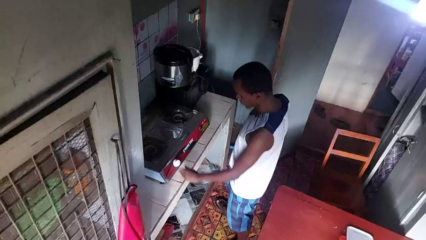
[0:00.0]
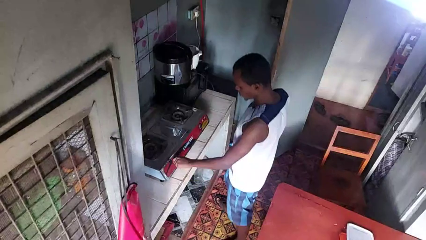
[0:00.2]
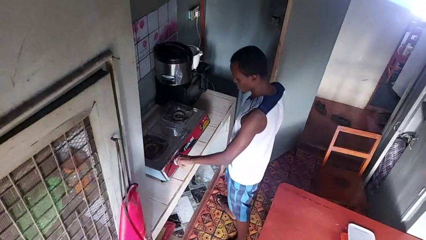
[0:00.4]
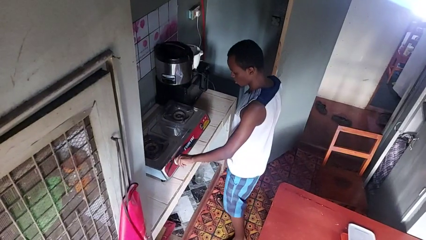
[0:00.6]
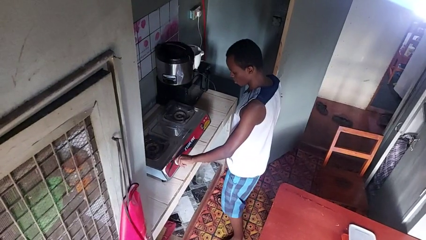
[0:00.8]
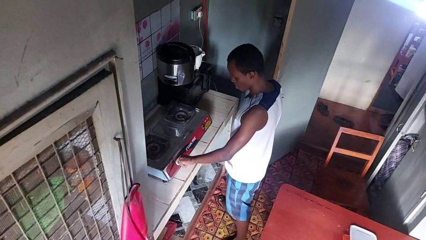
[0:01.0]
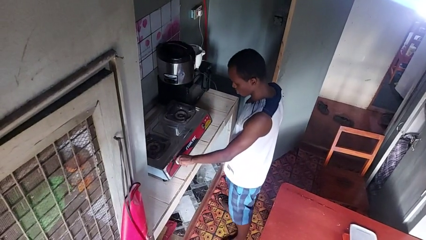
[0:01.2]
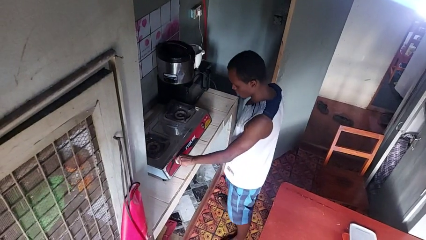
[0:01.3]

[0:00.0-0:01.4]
person turns on stovetop

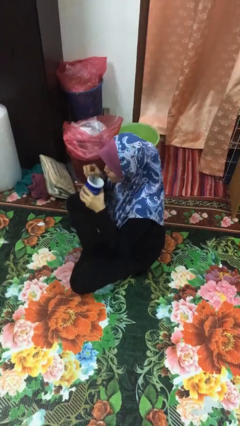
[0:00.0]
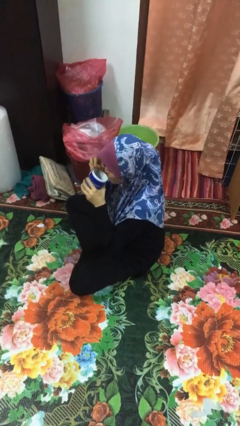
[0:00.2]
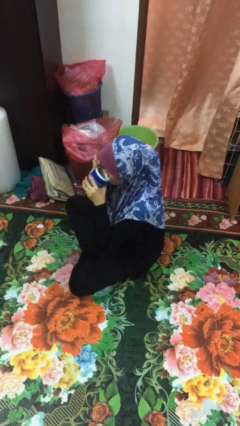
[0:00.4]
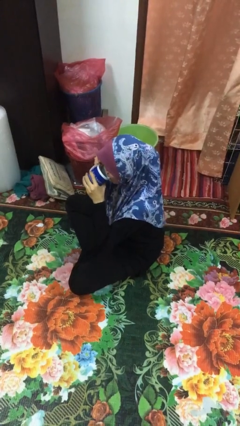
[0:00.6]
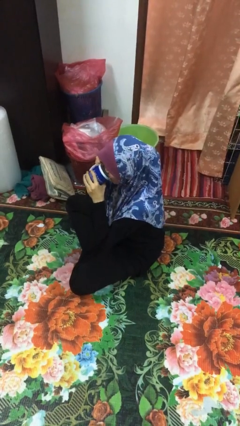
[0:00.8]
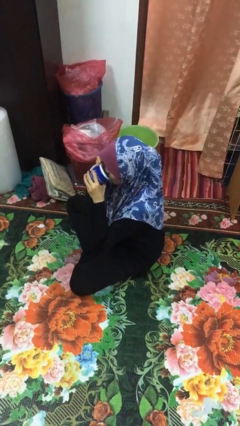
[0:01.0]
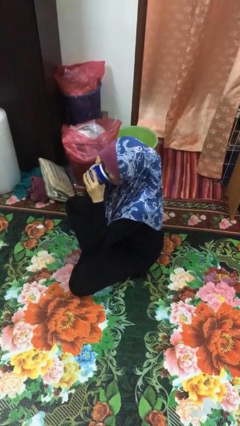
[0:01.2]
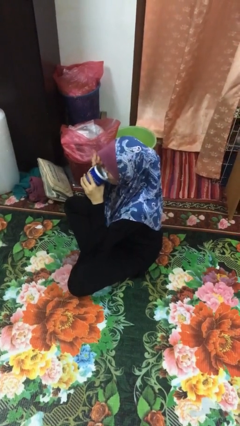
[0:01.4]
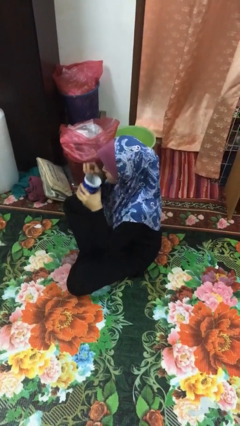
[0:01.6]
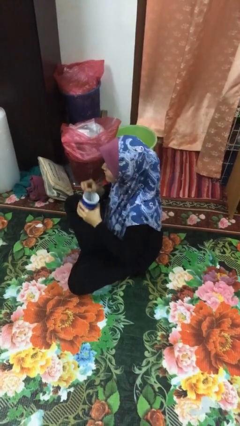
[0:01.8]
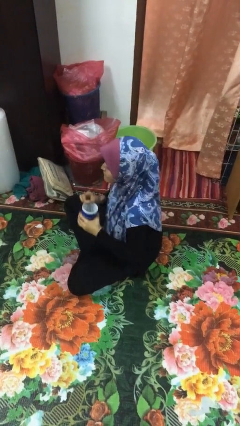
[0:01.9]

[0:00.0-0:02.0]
person drinks from mug

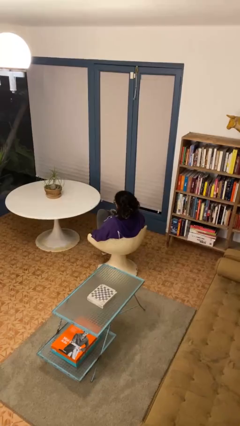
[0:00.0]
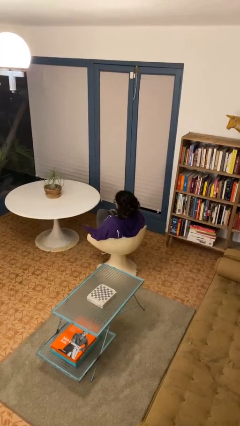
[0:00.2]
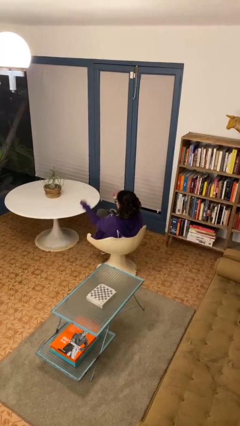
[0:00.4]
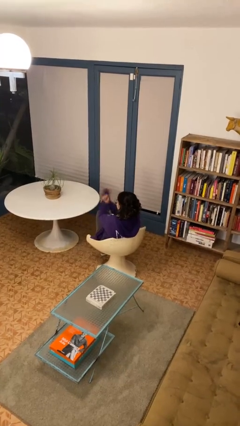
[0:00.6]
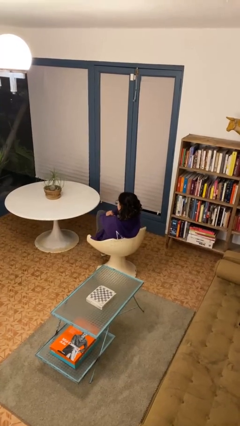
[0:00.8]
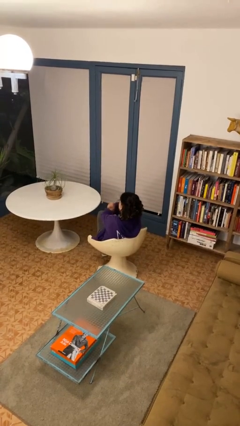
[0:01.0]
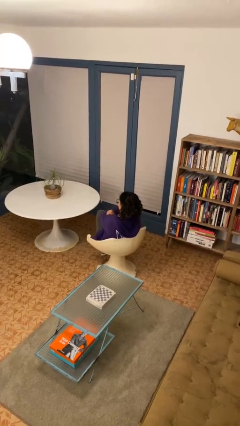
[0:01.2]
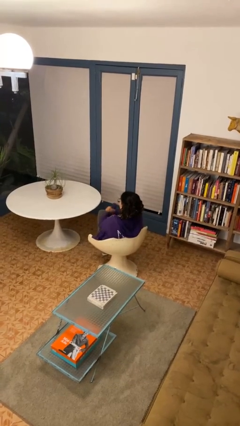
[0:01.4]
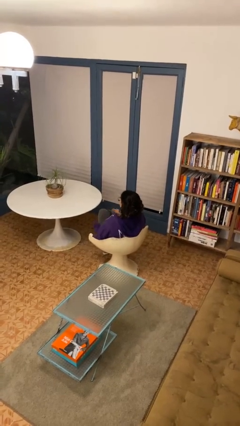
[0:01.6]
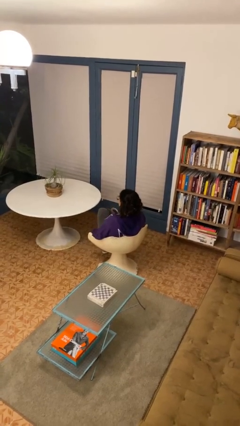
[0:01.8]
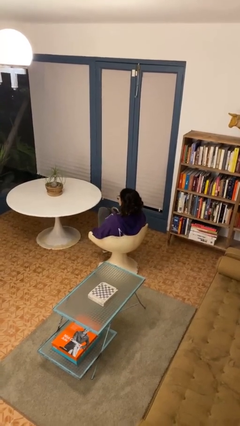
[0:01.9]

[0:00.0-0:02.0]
person gestures arms x

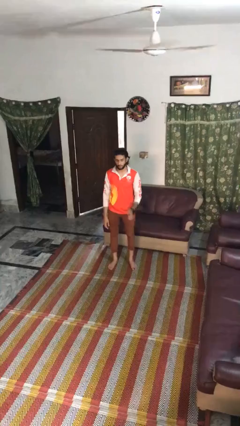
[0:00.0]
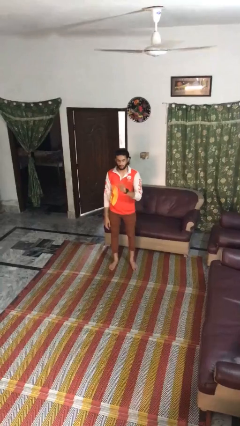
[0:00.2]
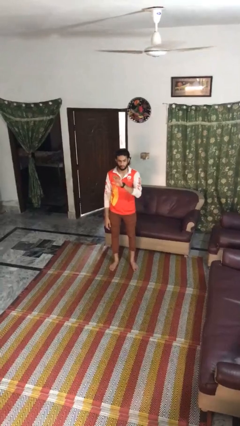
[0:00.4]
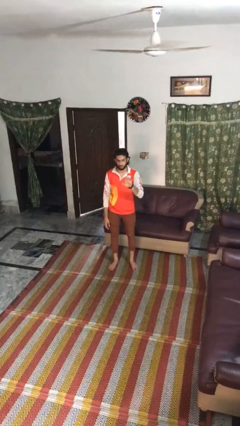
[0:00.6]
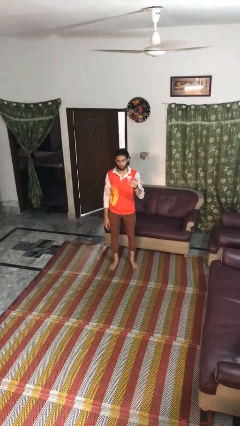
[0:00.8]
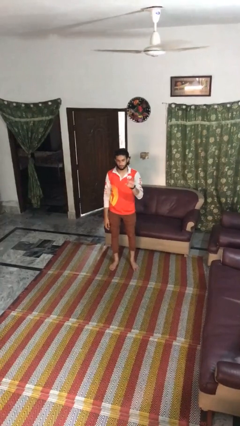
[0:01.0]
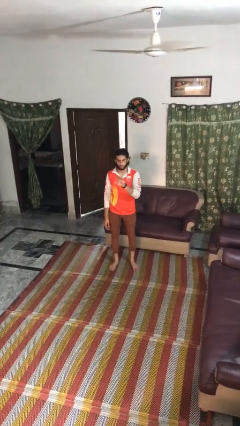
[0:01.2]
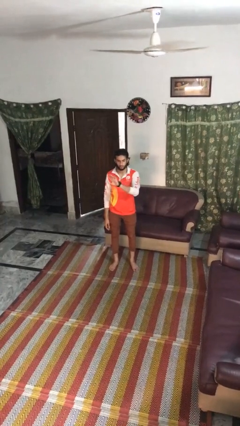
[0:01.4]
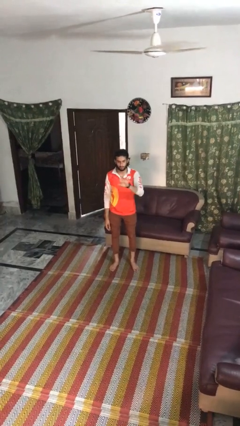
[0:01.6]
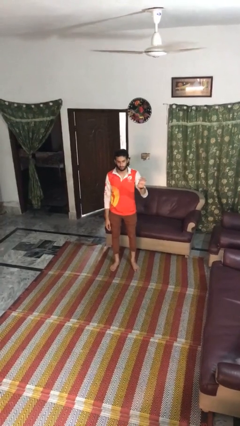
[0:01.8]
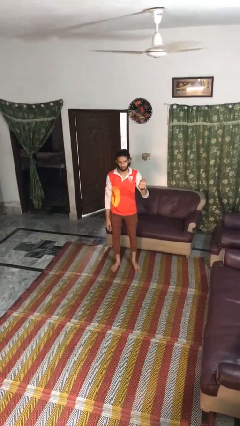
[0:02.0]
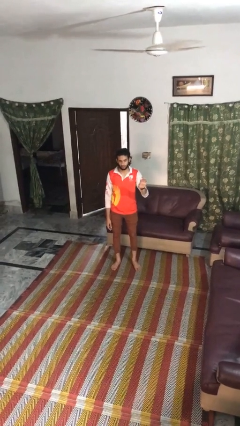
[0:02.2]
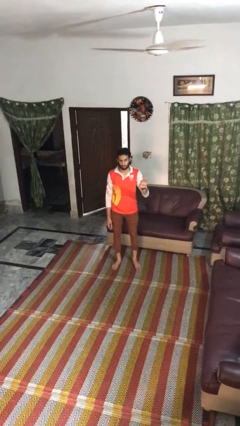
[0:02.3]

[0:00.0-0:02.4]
person gestures swipe left

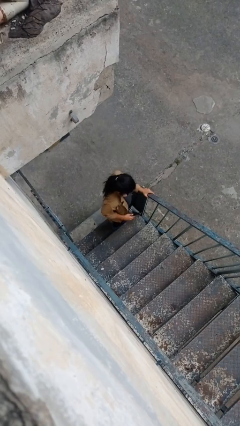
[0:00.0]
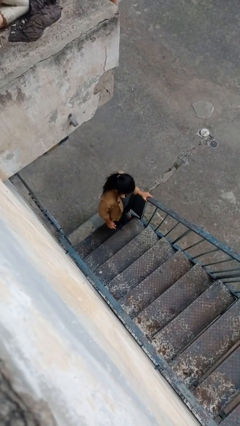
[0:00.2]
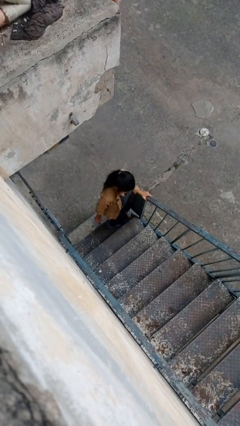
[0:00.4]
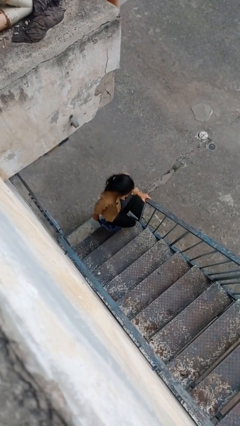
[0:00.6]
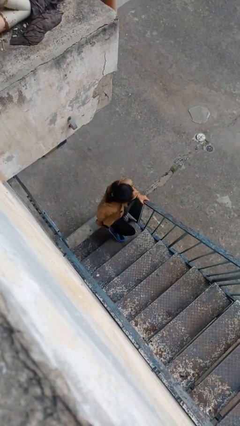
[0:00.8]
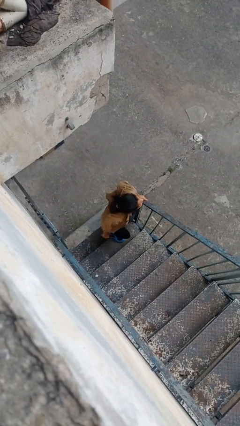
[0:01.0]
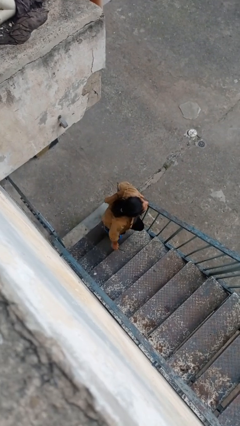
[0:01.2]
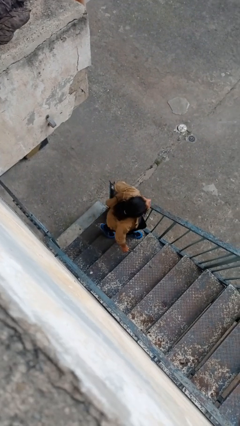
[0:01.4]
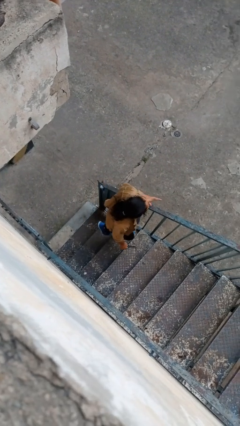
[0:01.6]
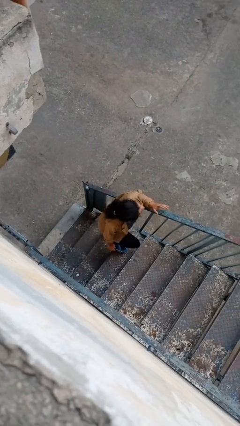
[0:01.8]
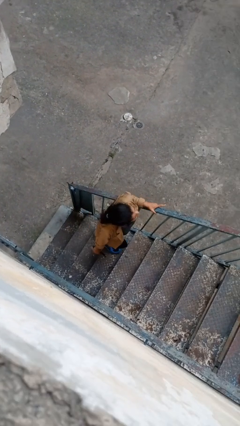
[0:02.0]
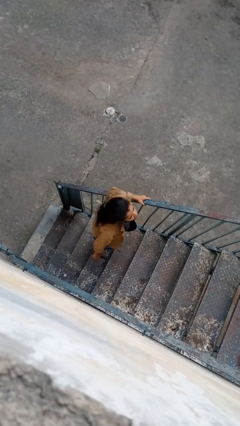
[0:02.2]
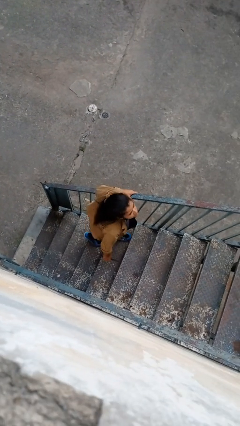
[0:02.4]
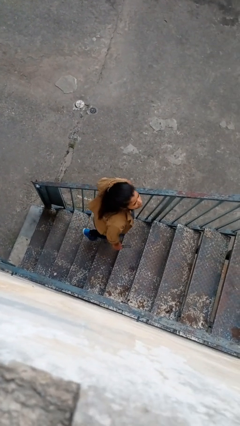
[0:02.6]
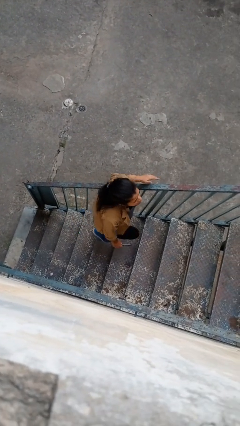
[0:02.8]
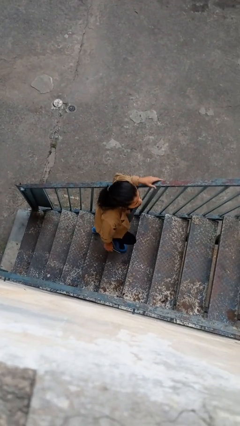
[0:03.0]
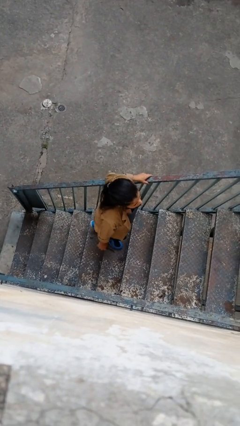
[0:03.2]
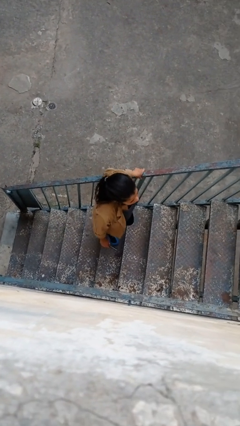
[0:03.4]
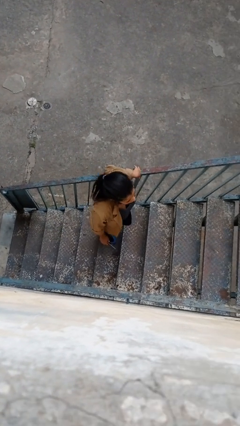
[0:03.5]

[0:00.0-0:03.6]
person climbs up stairs

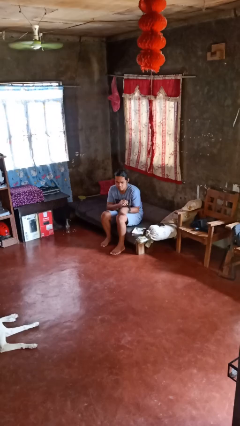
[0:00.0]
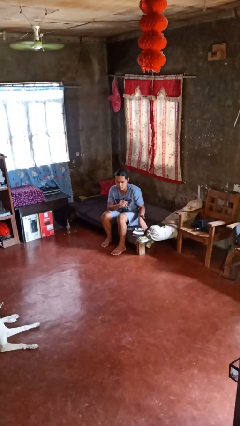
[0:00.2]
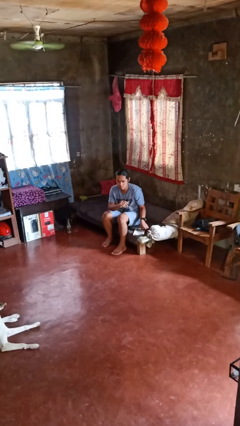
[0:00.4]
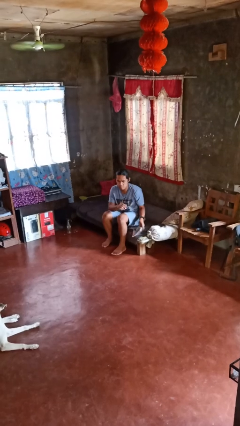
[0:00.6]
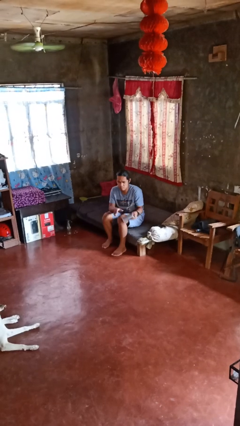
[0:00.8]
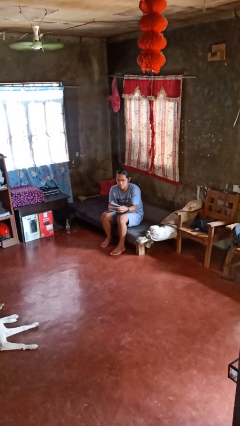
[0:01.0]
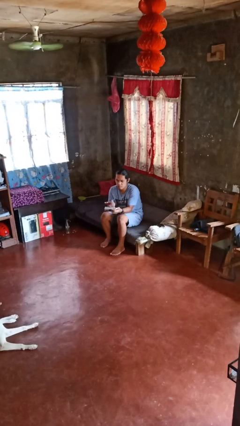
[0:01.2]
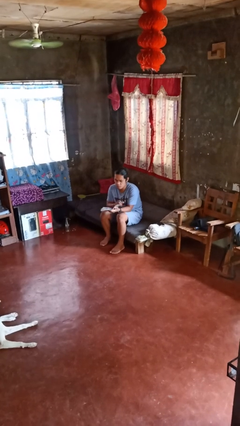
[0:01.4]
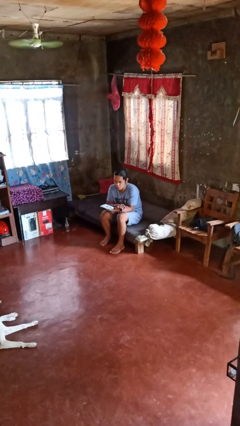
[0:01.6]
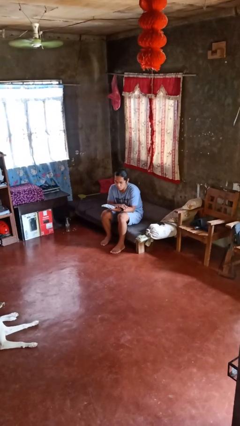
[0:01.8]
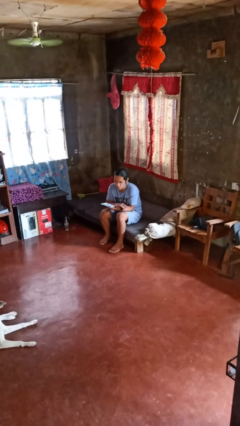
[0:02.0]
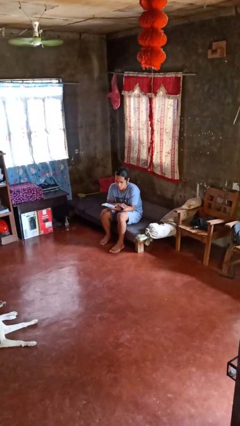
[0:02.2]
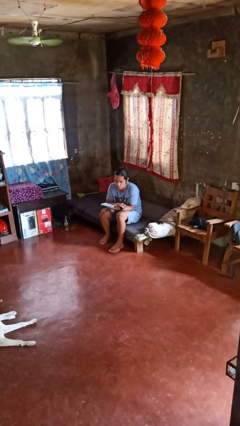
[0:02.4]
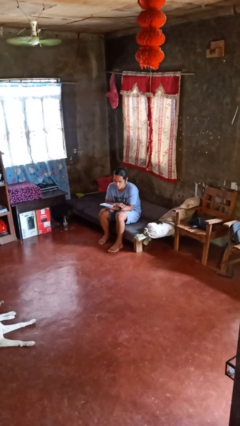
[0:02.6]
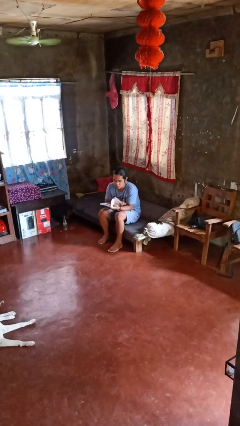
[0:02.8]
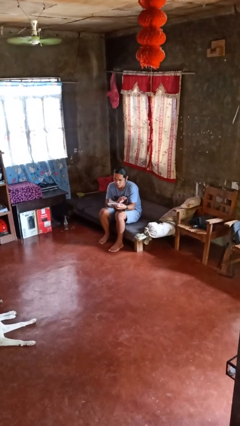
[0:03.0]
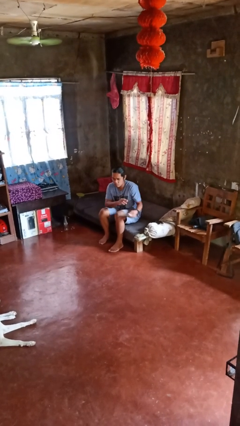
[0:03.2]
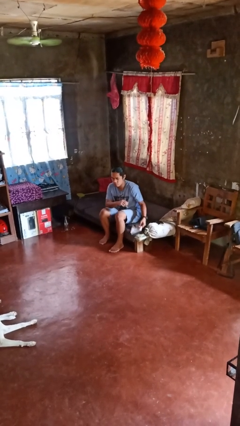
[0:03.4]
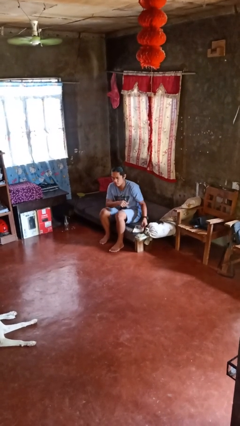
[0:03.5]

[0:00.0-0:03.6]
person reads magazine

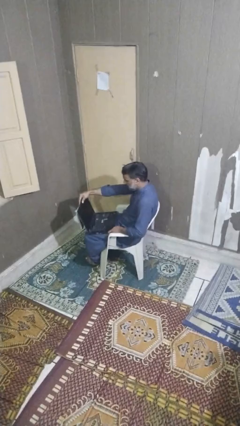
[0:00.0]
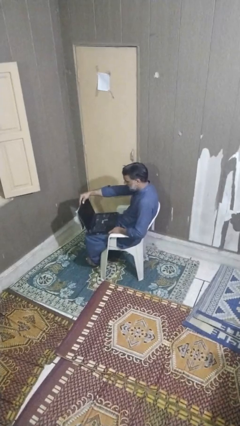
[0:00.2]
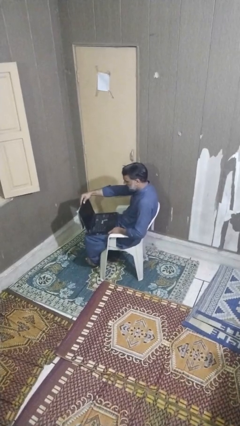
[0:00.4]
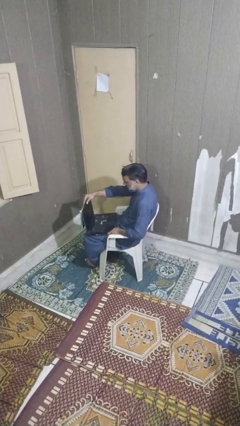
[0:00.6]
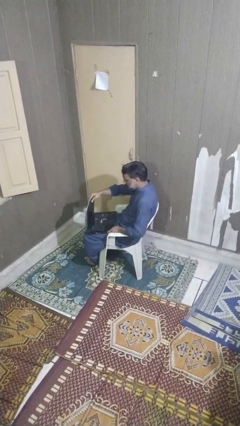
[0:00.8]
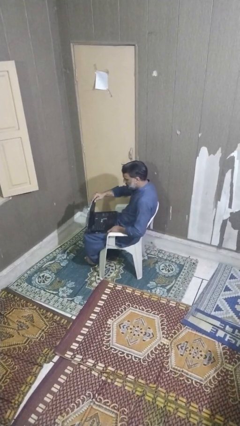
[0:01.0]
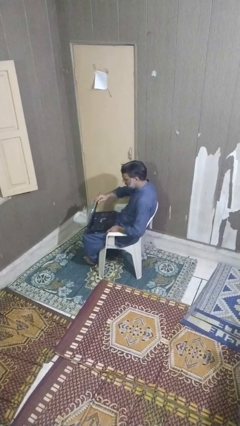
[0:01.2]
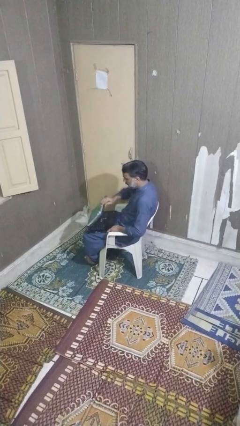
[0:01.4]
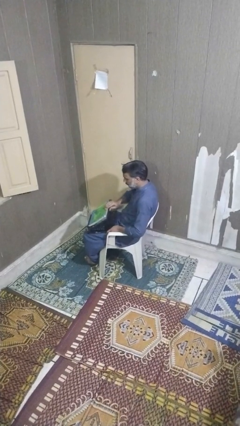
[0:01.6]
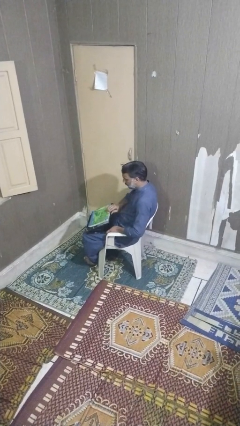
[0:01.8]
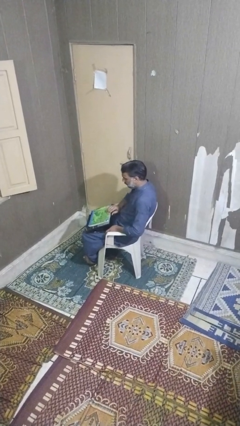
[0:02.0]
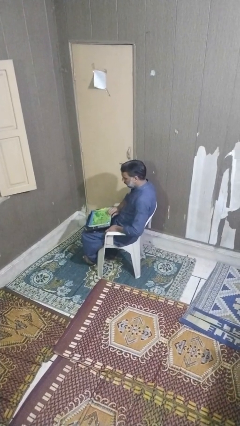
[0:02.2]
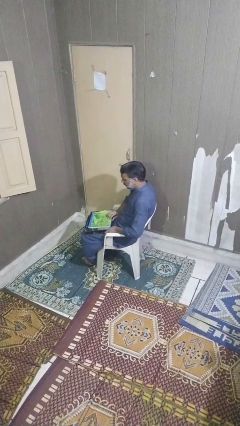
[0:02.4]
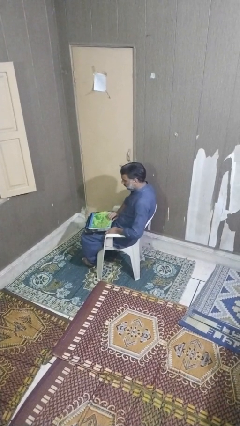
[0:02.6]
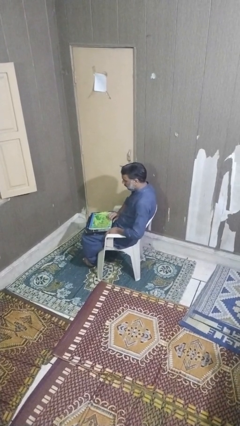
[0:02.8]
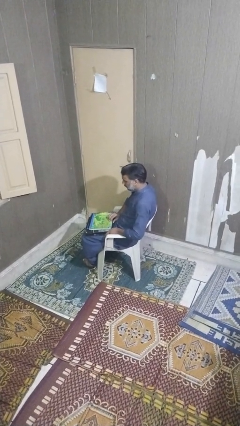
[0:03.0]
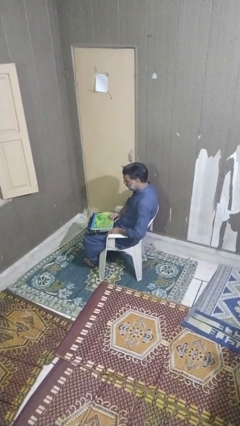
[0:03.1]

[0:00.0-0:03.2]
person closes laptop
